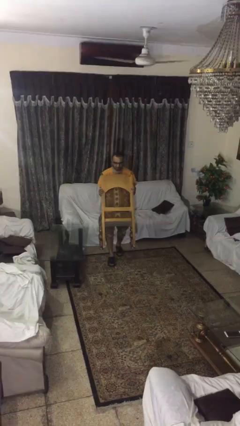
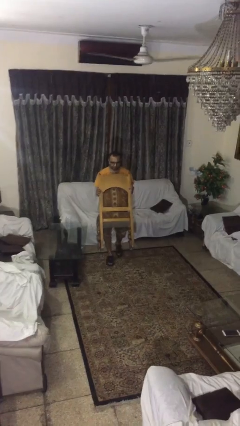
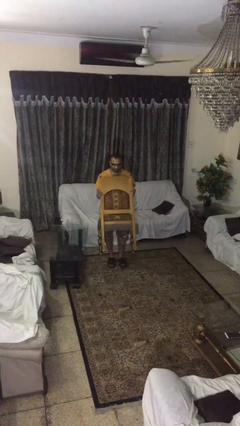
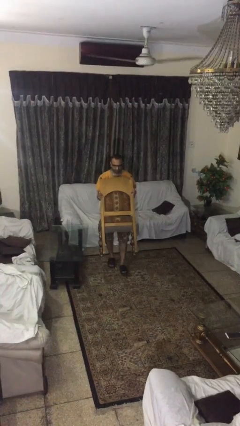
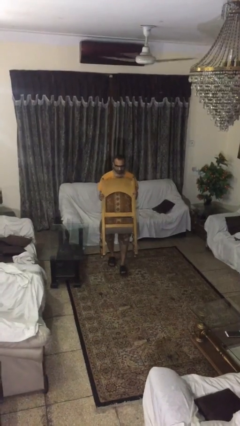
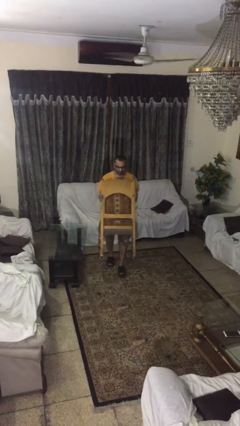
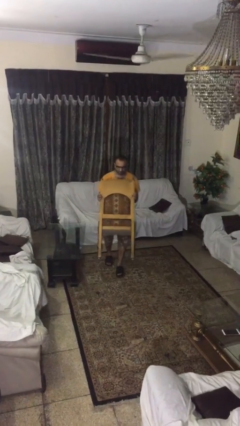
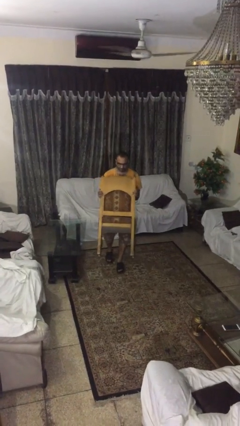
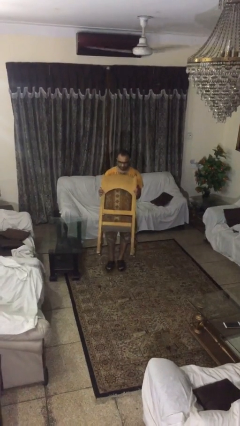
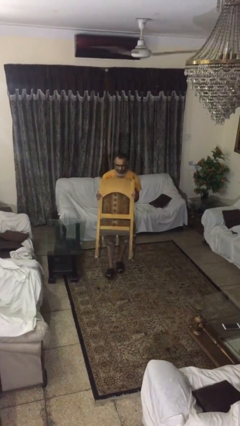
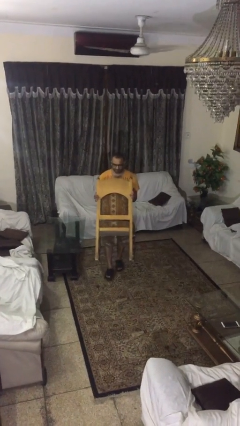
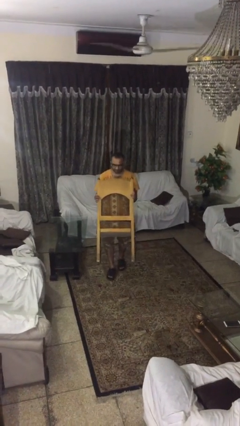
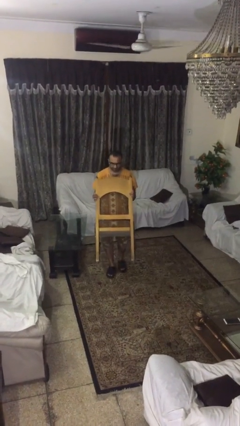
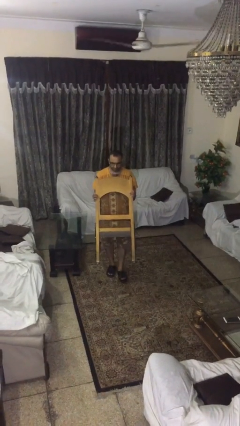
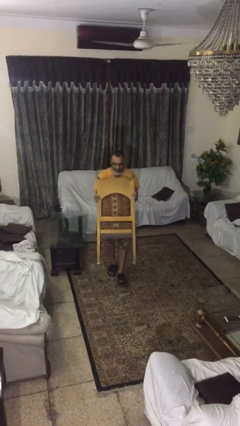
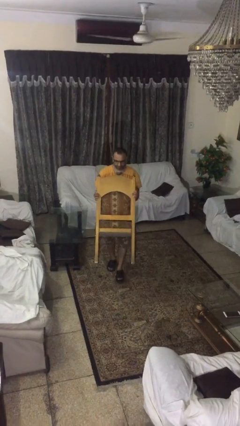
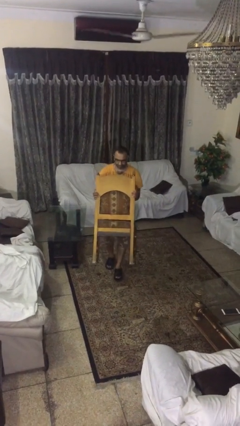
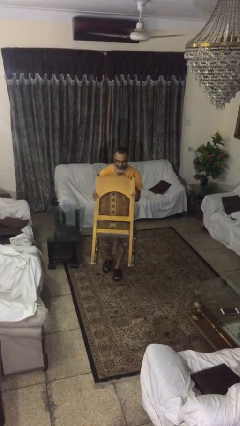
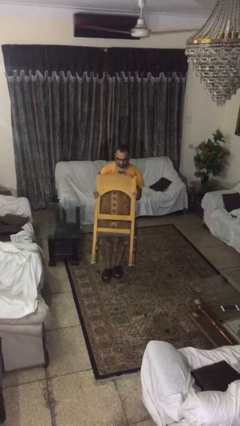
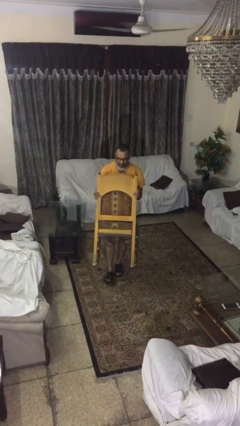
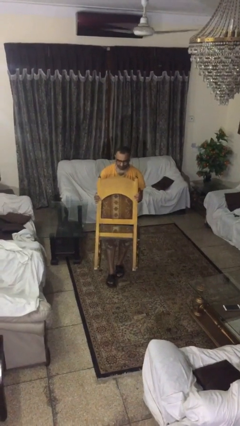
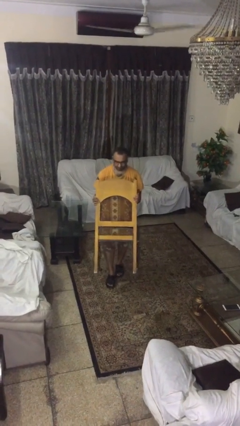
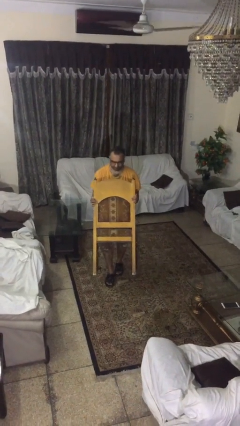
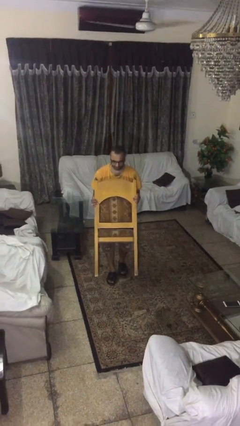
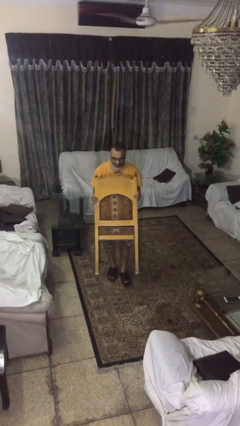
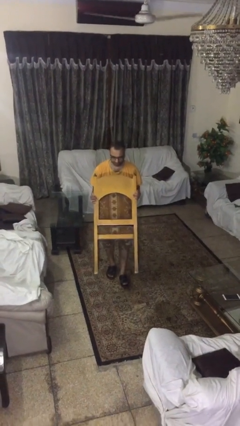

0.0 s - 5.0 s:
person carries heavy object

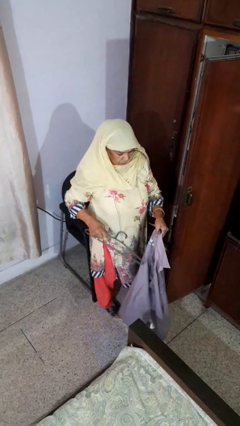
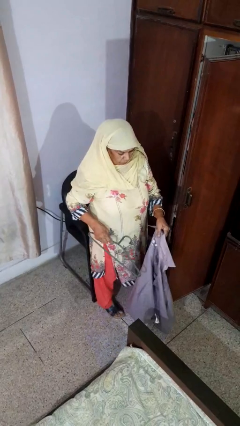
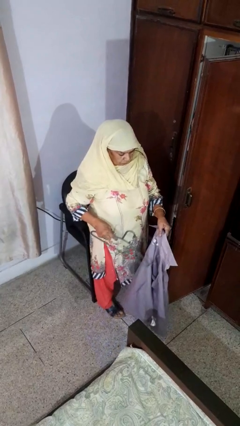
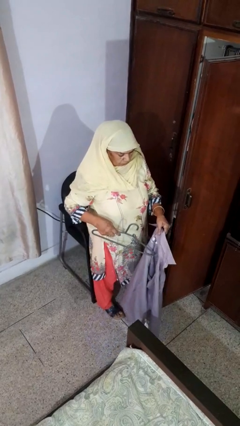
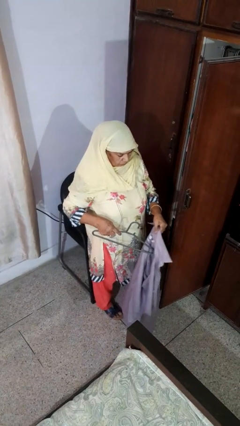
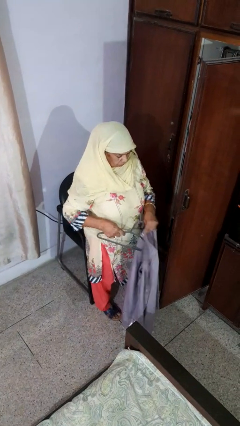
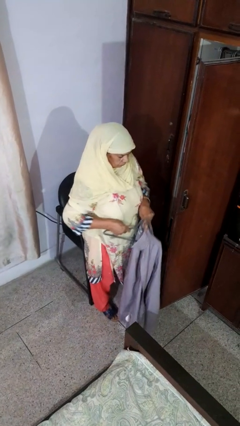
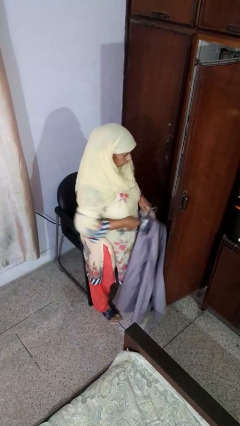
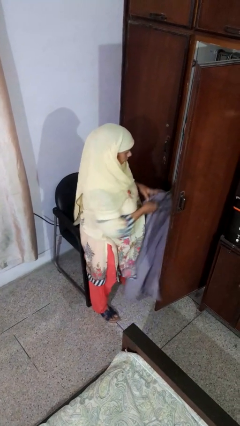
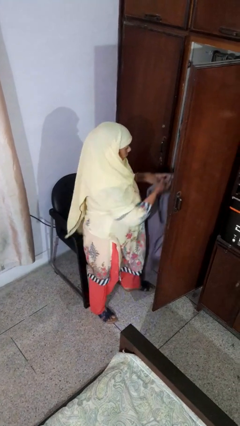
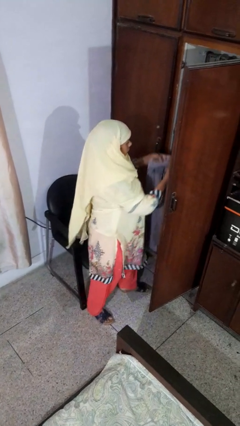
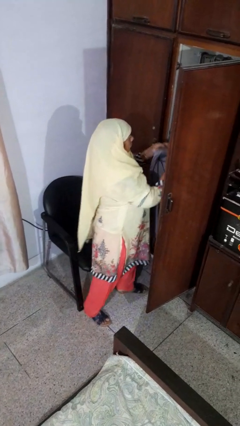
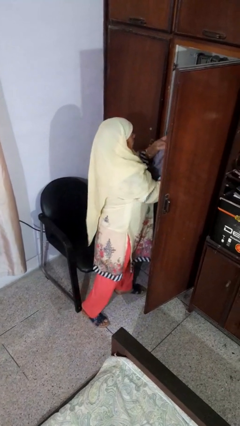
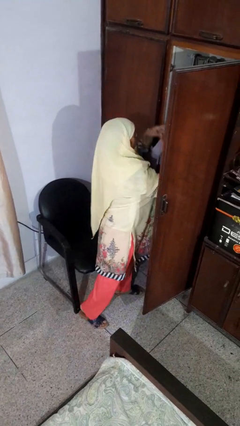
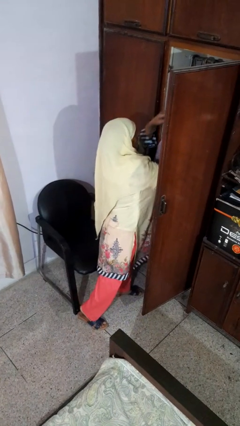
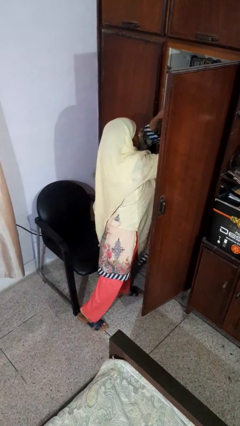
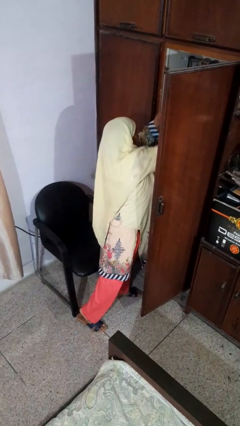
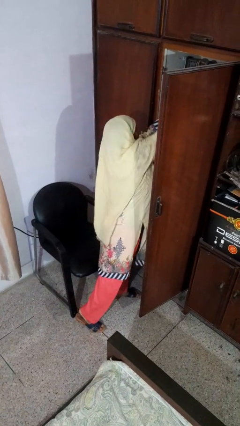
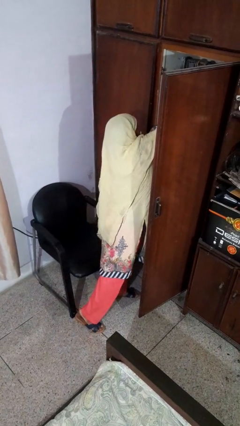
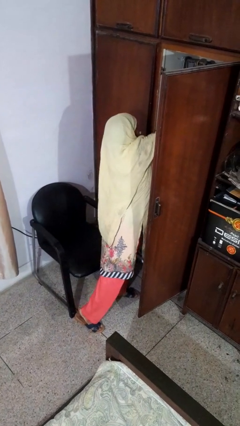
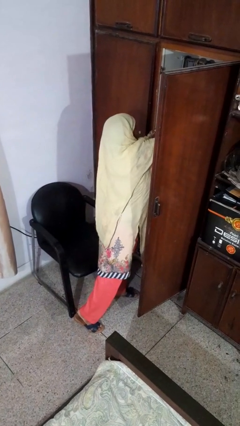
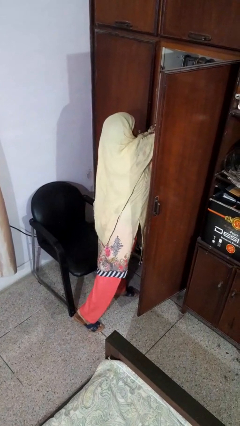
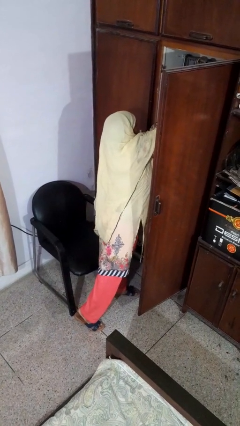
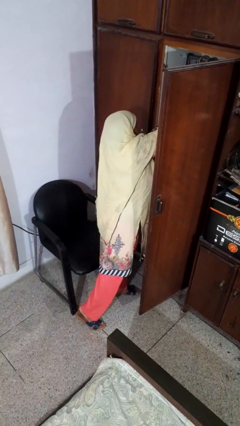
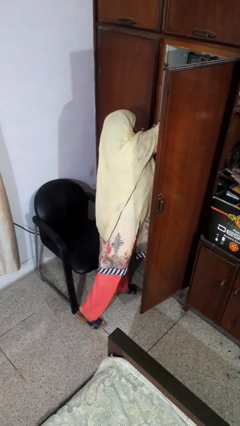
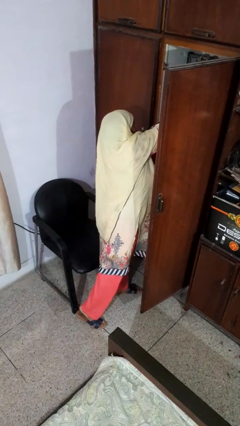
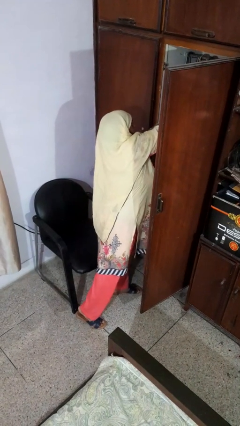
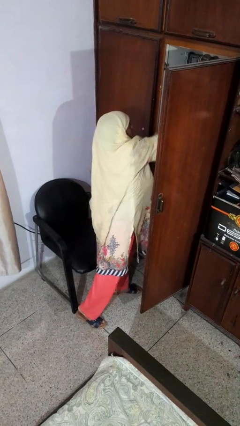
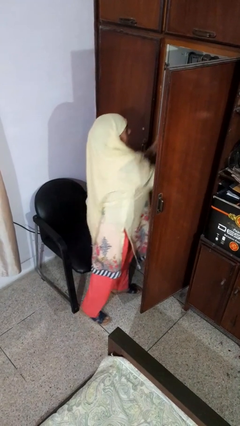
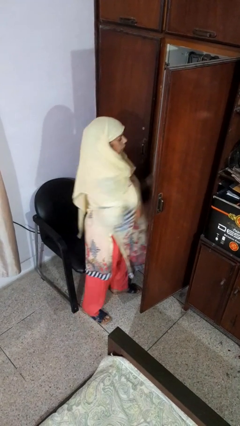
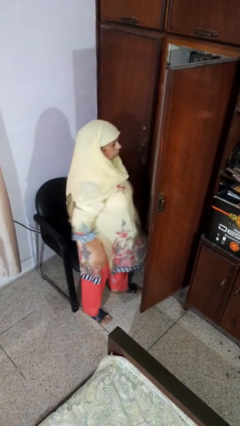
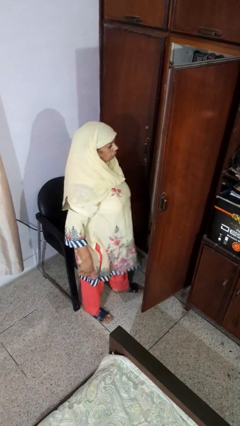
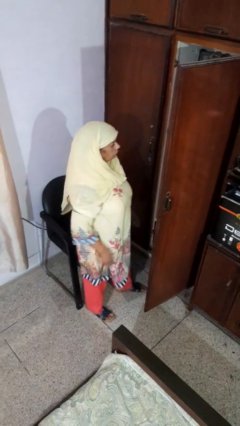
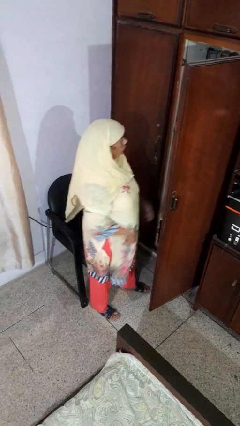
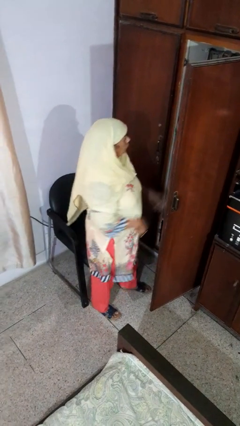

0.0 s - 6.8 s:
person puts clothes into closet

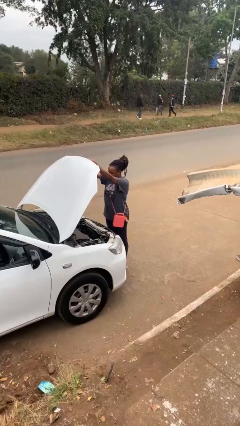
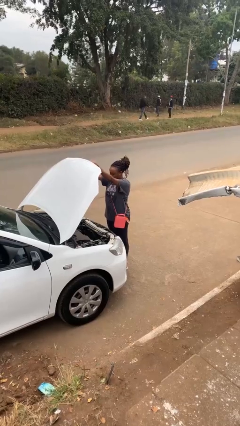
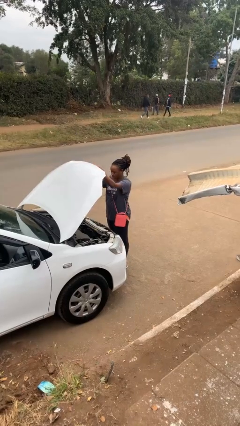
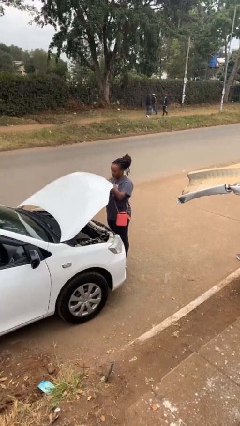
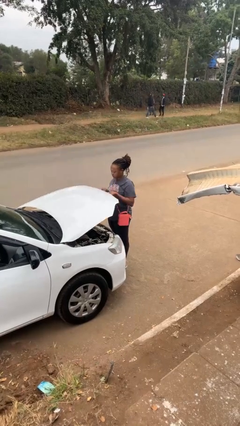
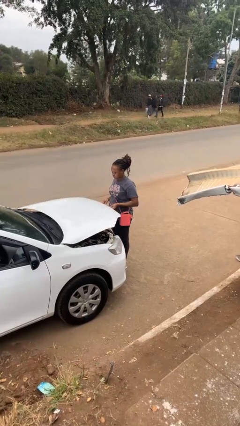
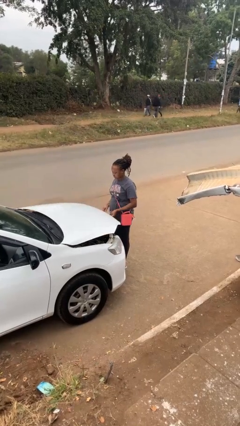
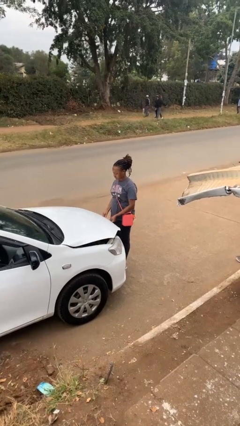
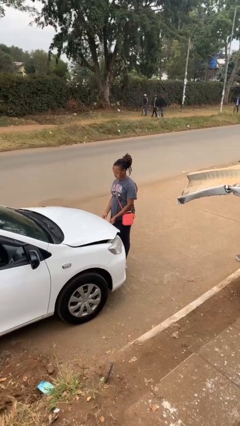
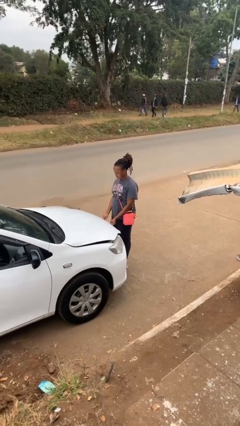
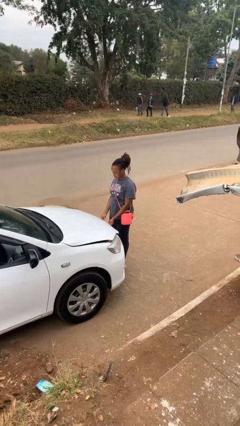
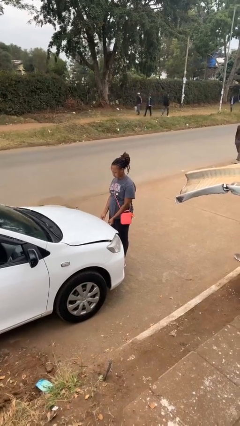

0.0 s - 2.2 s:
person closes car hood

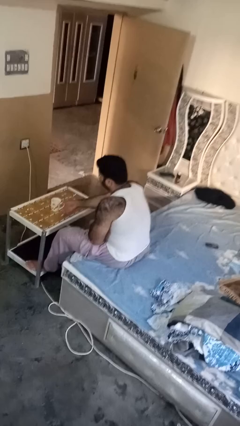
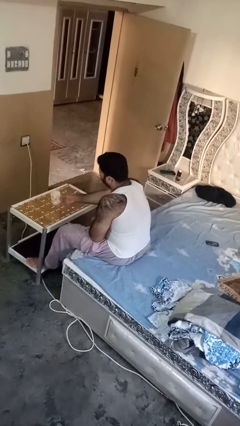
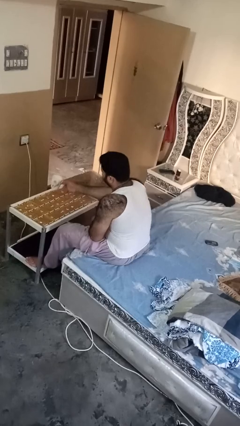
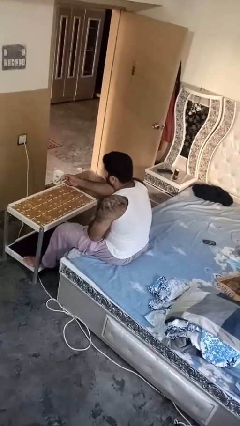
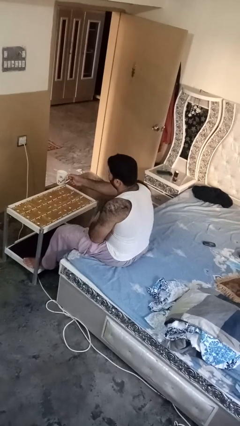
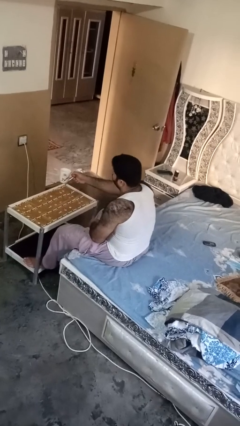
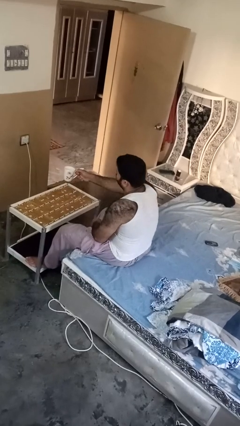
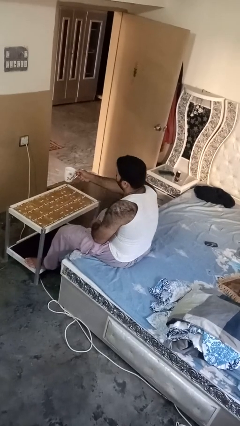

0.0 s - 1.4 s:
person picks up object from table

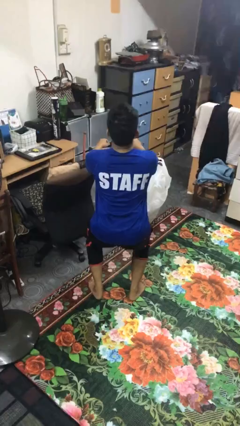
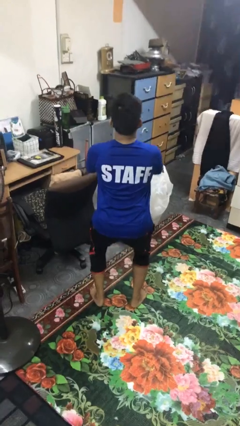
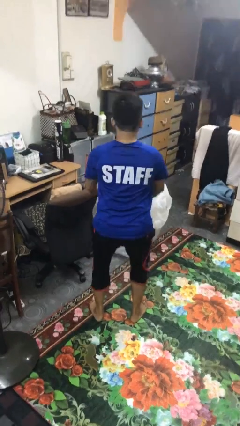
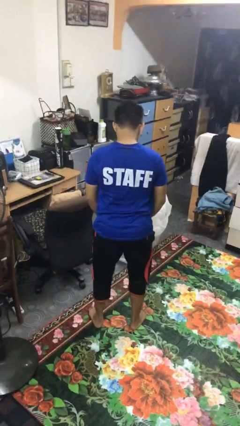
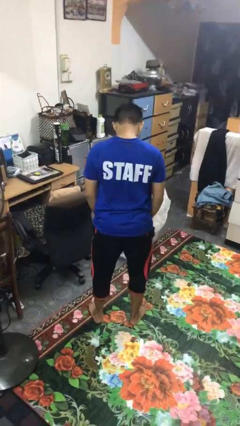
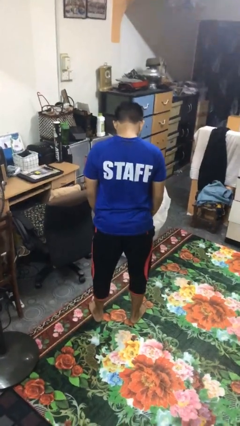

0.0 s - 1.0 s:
person stands up

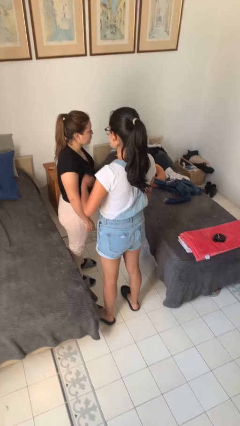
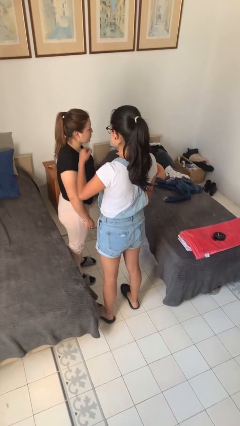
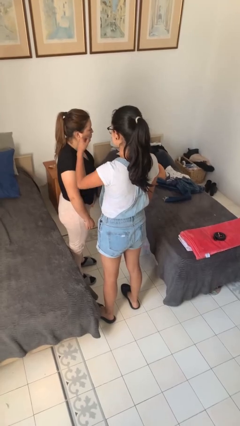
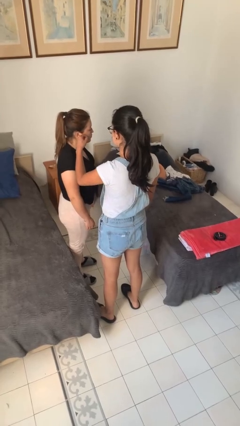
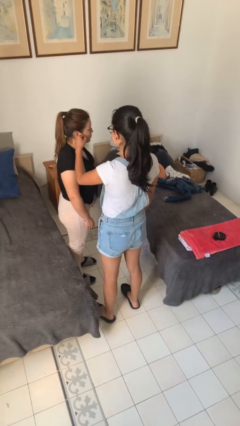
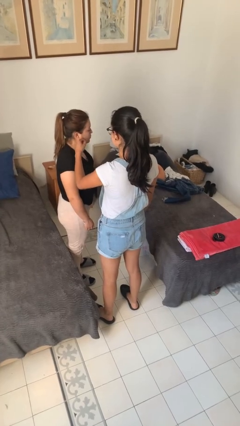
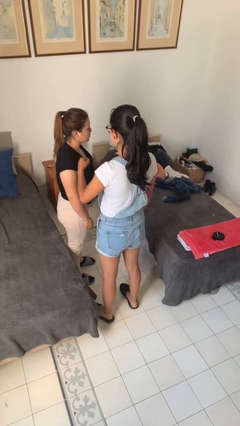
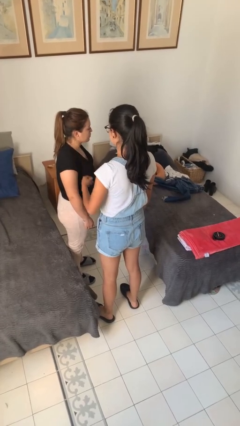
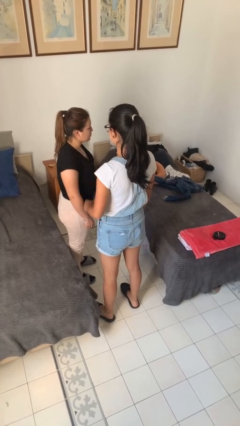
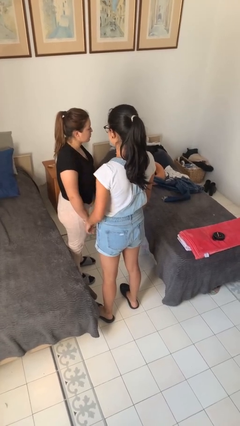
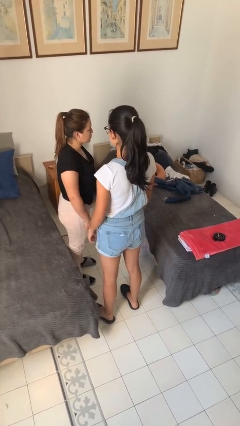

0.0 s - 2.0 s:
person touches face of person
